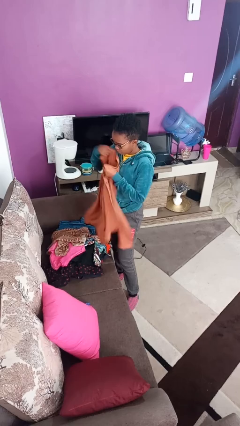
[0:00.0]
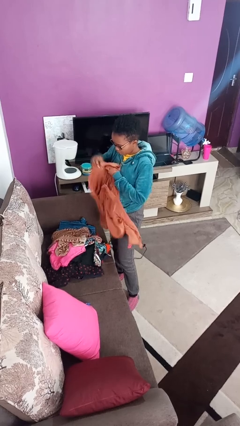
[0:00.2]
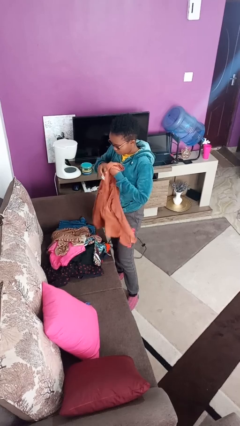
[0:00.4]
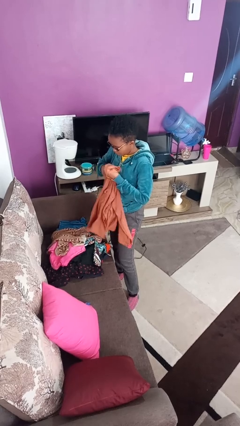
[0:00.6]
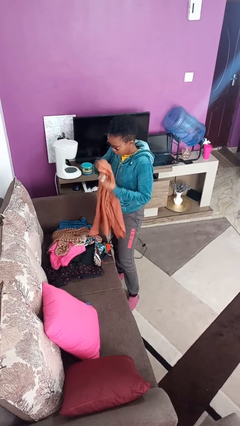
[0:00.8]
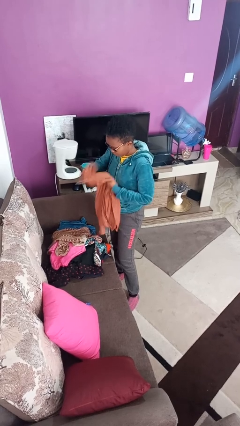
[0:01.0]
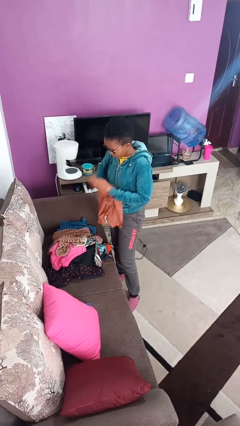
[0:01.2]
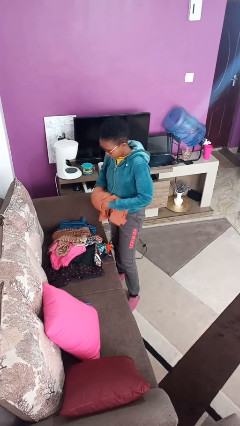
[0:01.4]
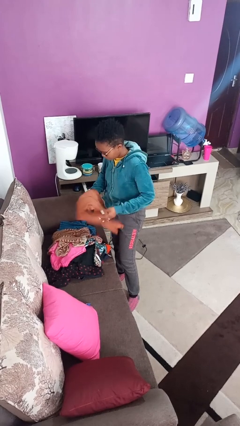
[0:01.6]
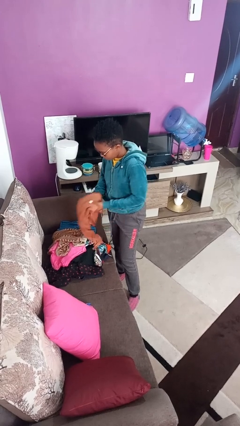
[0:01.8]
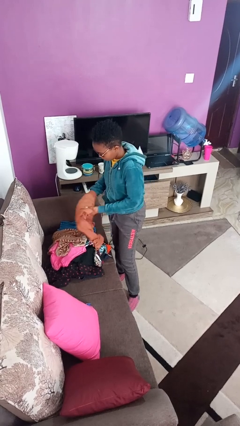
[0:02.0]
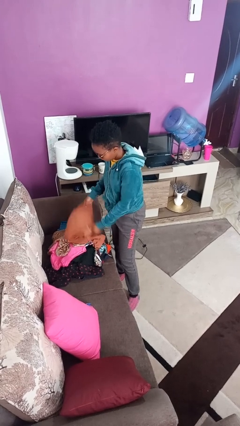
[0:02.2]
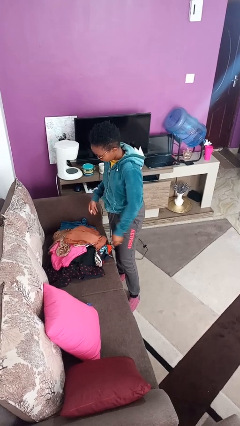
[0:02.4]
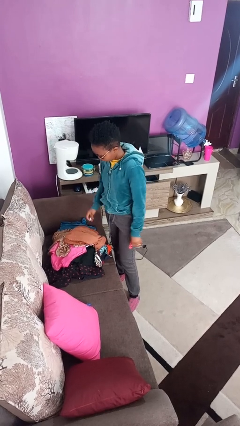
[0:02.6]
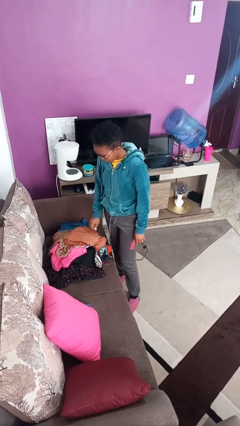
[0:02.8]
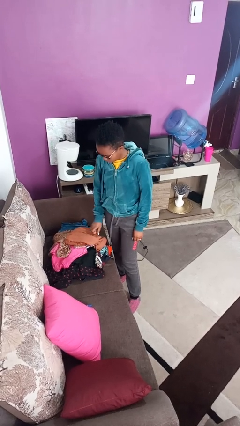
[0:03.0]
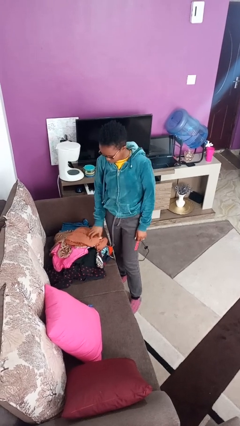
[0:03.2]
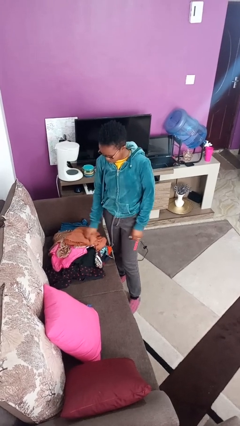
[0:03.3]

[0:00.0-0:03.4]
person folds shirt

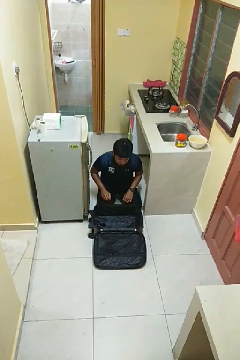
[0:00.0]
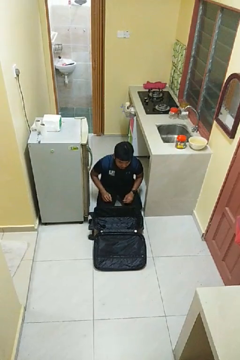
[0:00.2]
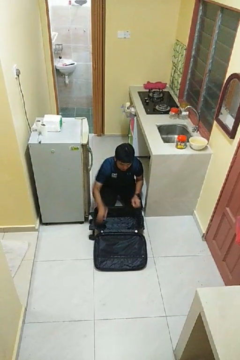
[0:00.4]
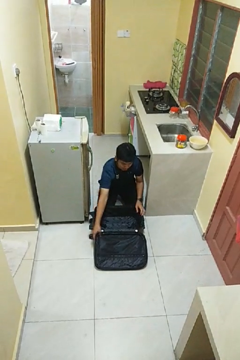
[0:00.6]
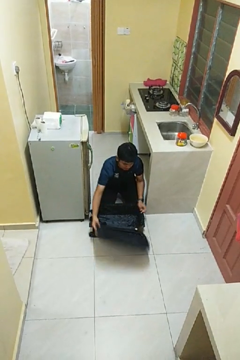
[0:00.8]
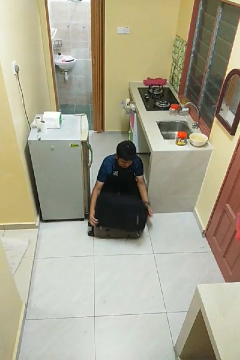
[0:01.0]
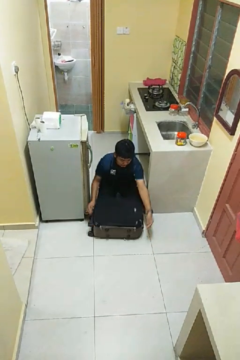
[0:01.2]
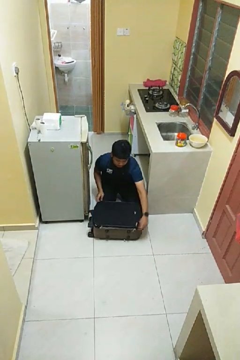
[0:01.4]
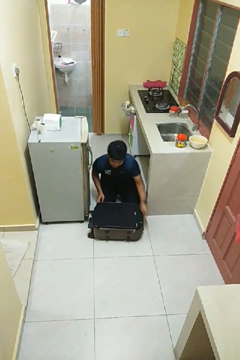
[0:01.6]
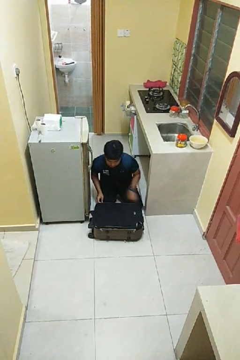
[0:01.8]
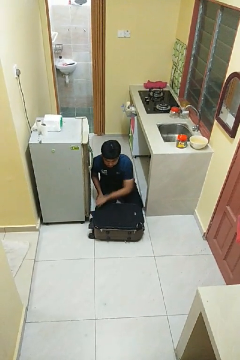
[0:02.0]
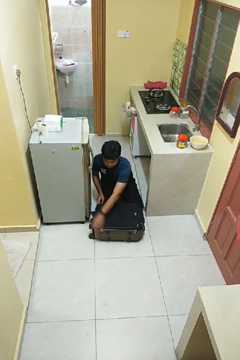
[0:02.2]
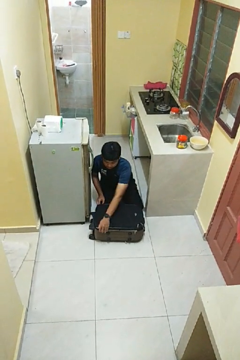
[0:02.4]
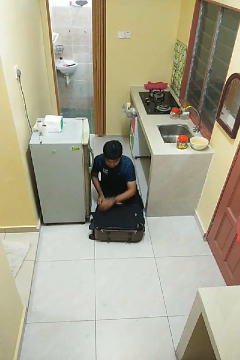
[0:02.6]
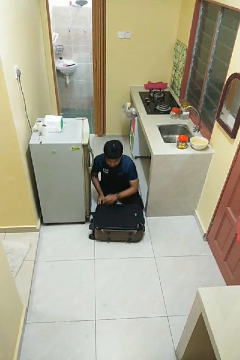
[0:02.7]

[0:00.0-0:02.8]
person closes suitcase

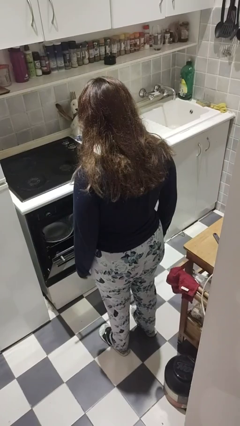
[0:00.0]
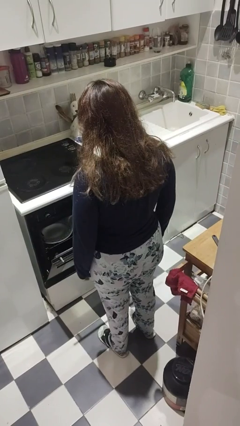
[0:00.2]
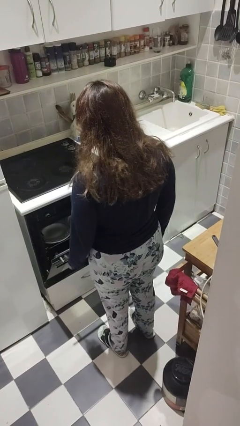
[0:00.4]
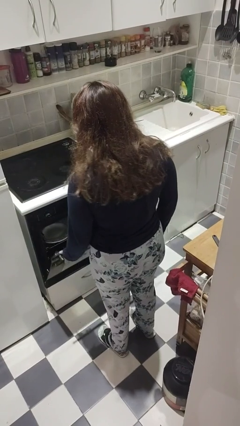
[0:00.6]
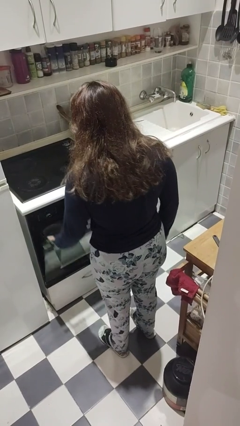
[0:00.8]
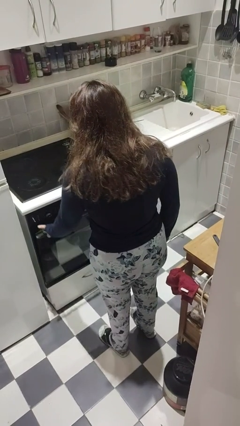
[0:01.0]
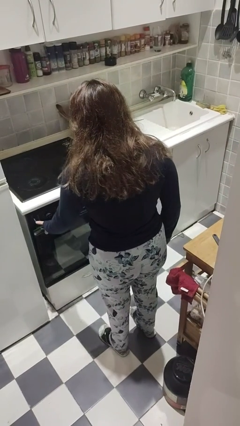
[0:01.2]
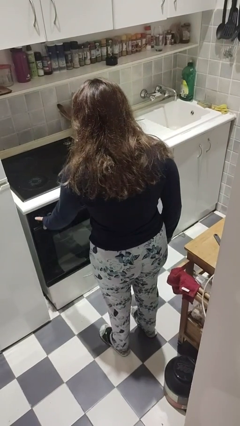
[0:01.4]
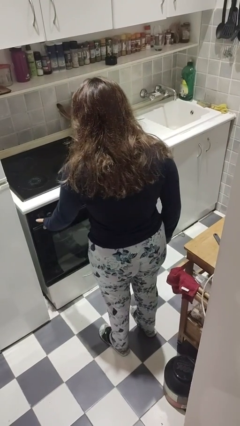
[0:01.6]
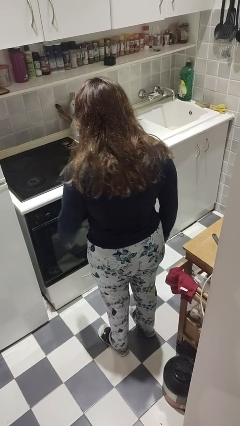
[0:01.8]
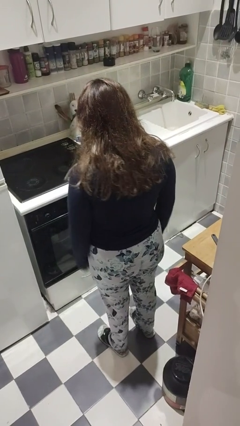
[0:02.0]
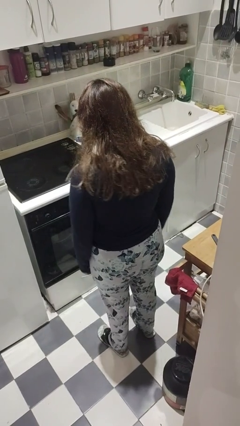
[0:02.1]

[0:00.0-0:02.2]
person closes dishwasher

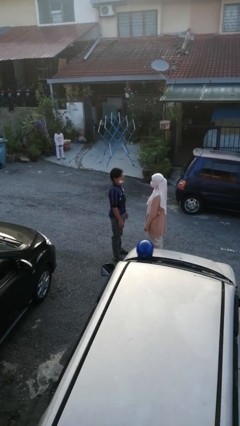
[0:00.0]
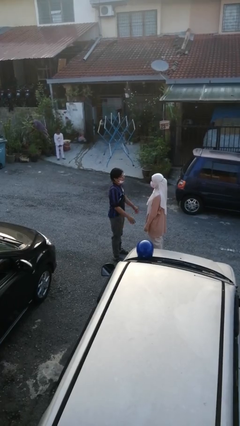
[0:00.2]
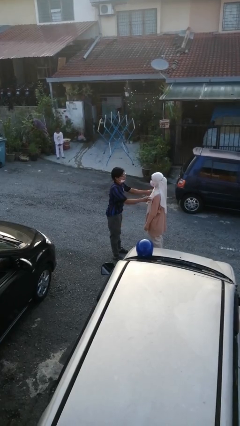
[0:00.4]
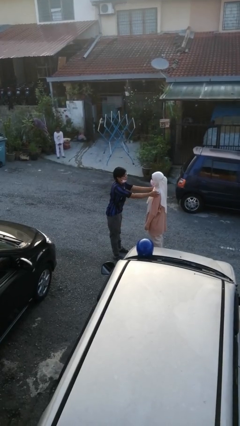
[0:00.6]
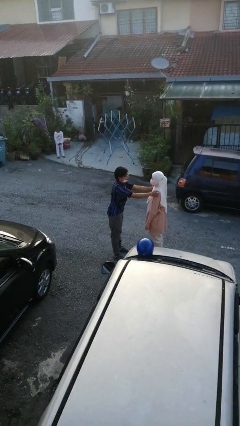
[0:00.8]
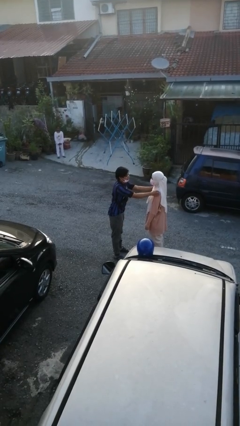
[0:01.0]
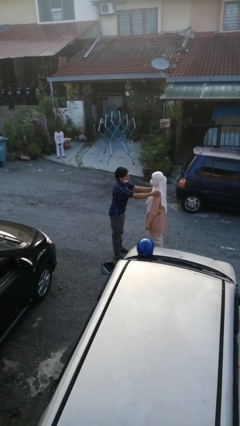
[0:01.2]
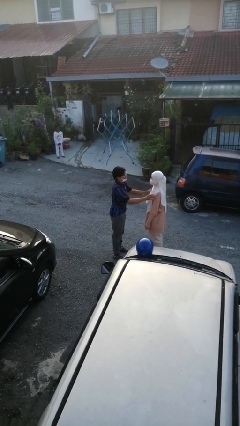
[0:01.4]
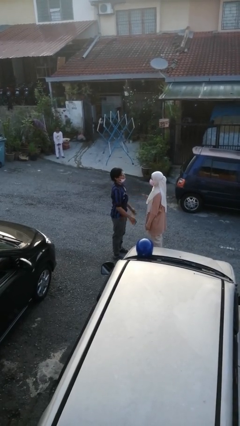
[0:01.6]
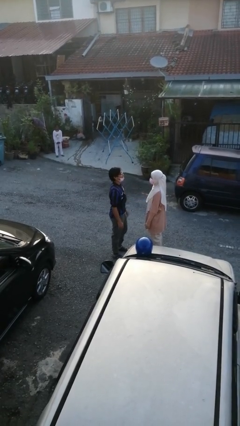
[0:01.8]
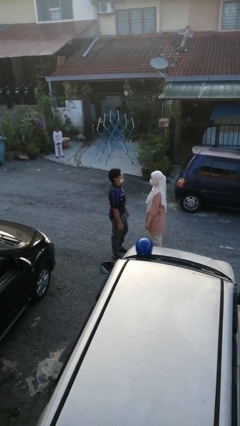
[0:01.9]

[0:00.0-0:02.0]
person pounds shoulders of person

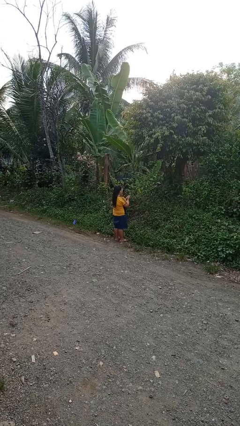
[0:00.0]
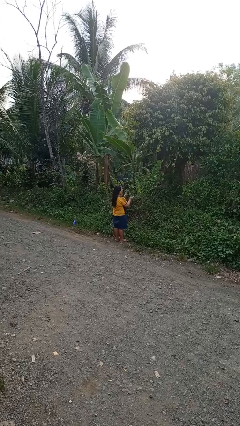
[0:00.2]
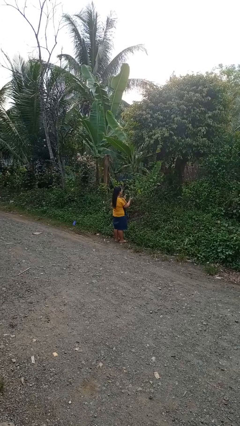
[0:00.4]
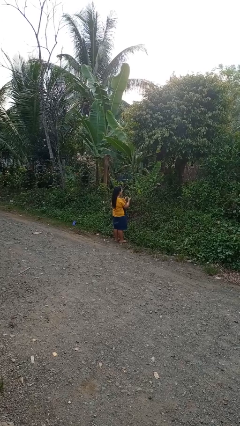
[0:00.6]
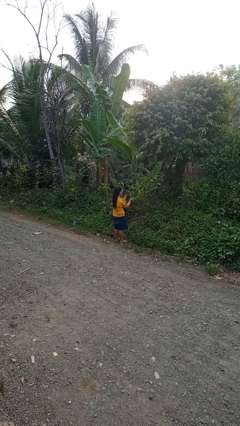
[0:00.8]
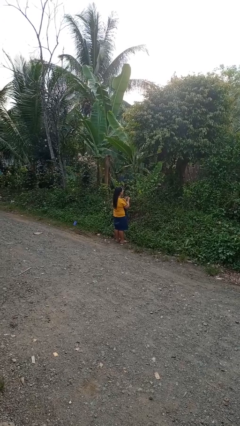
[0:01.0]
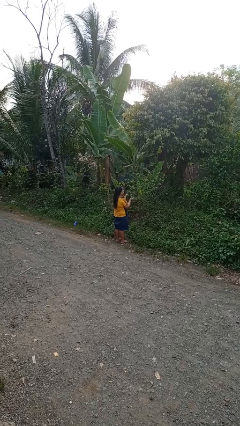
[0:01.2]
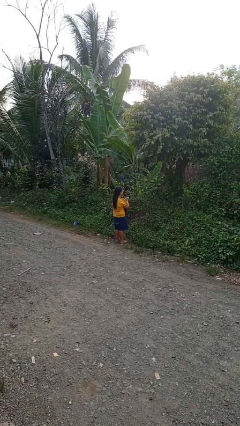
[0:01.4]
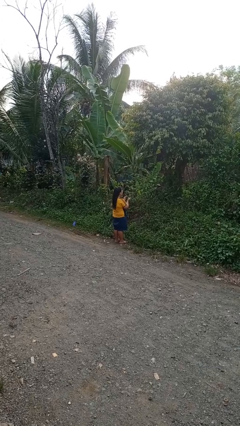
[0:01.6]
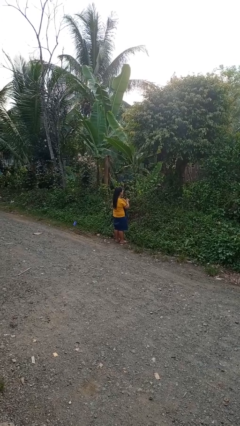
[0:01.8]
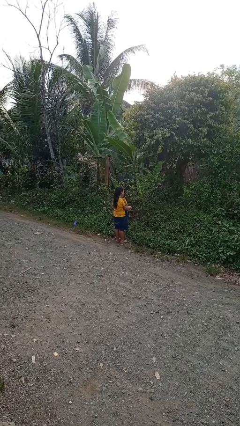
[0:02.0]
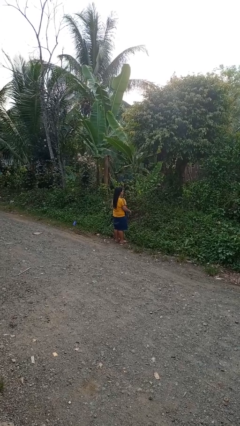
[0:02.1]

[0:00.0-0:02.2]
person claps hands

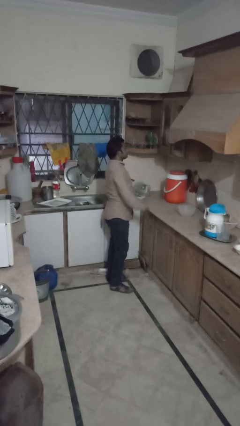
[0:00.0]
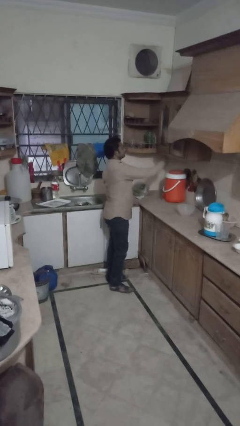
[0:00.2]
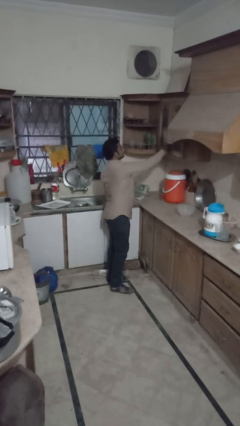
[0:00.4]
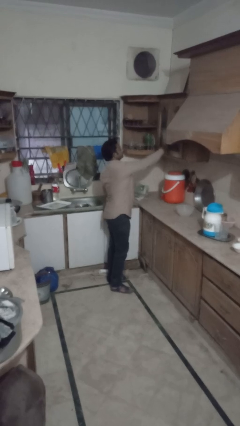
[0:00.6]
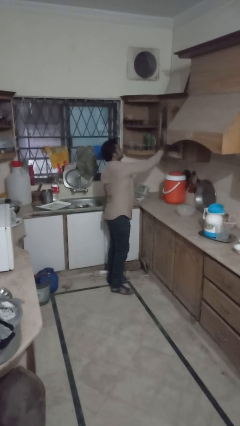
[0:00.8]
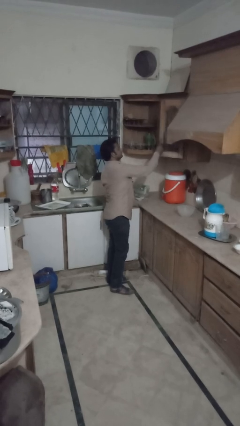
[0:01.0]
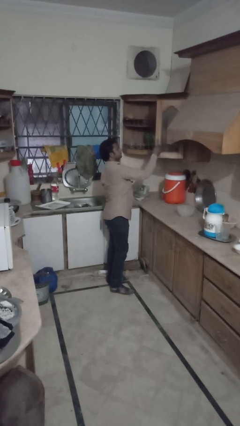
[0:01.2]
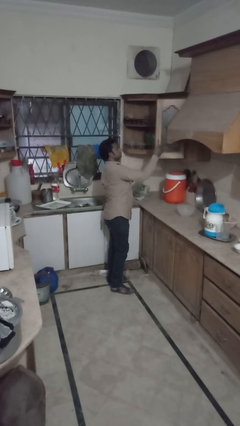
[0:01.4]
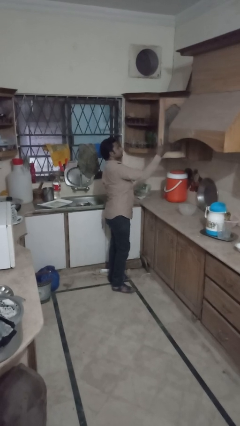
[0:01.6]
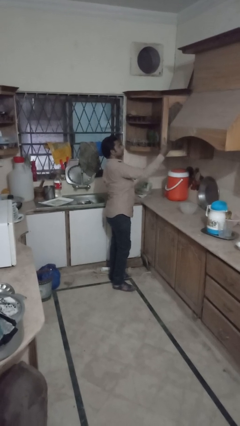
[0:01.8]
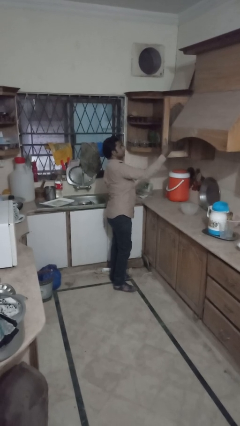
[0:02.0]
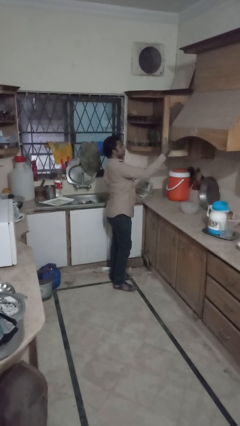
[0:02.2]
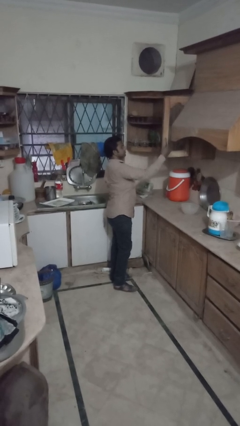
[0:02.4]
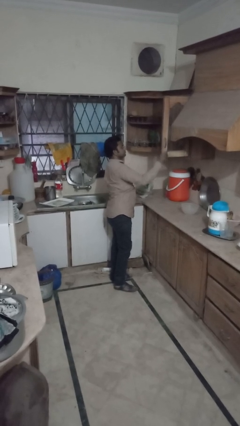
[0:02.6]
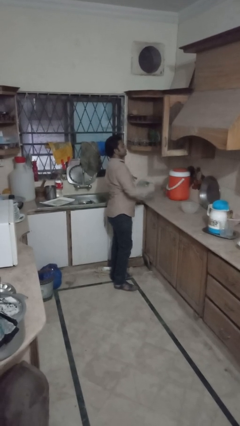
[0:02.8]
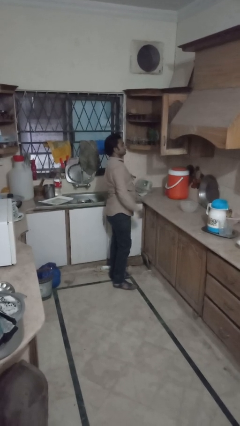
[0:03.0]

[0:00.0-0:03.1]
person opens cabinet

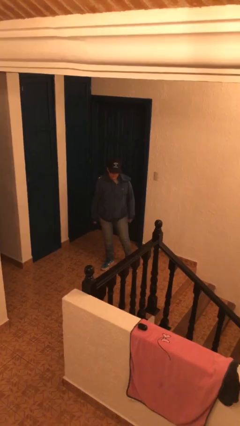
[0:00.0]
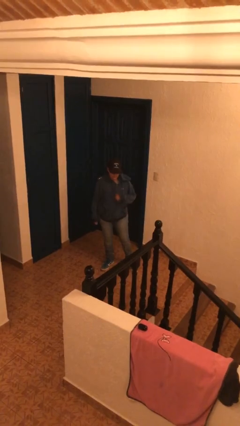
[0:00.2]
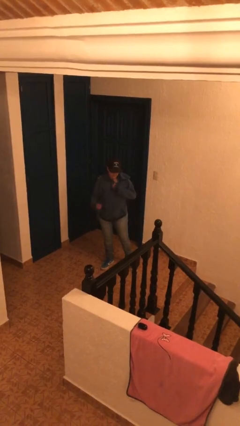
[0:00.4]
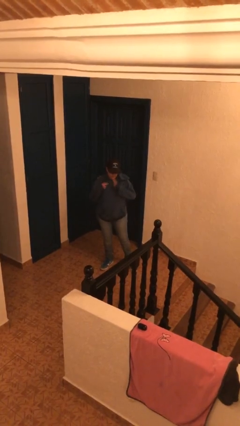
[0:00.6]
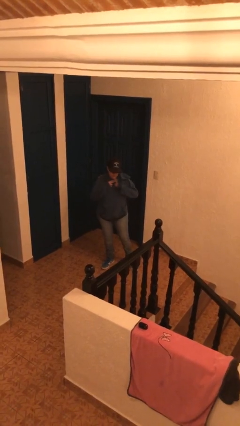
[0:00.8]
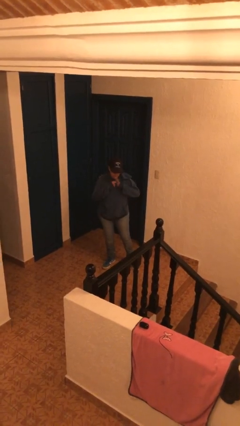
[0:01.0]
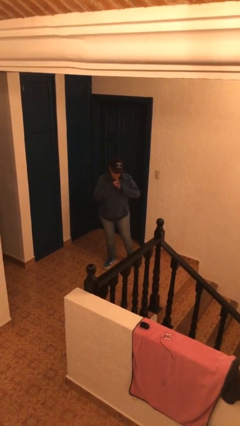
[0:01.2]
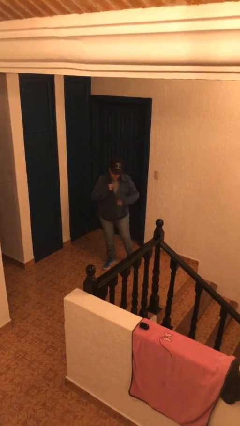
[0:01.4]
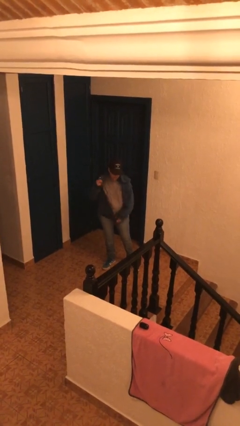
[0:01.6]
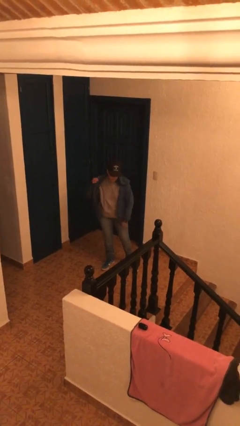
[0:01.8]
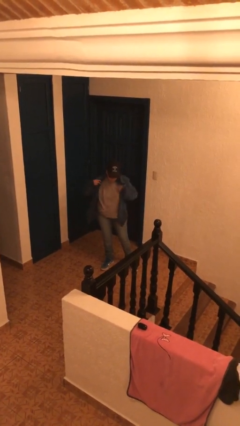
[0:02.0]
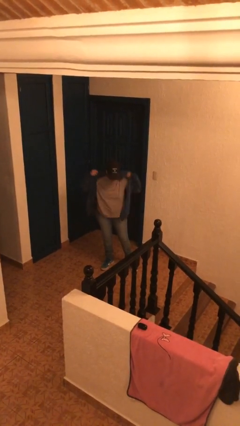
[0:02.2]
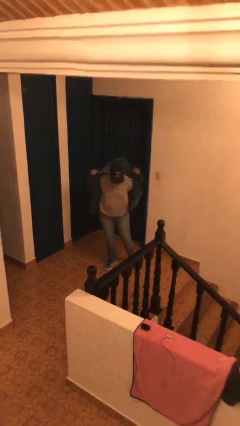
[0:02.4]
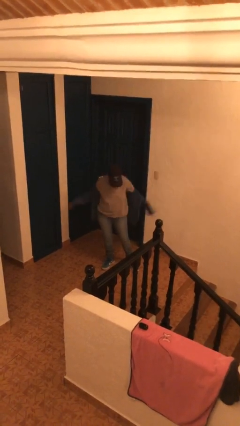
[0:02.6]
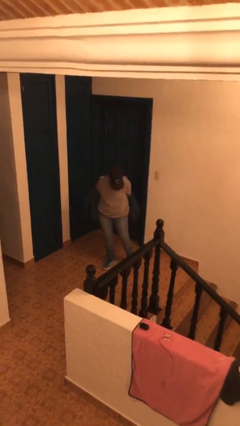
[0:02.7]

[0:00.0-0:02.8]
person unzips jacket
